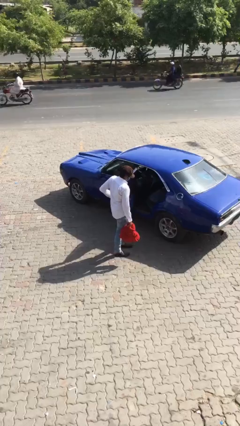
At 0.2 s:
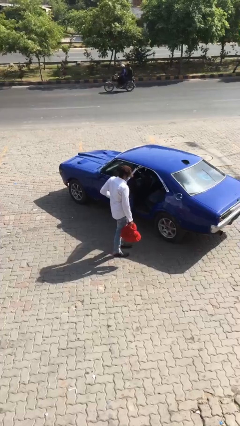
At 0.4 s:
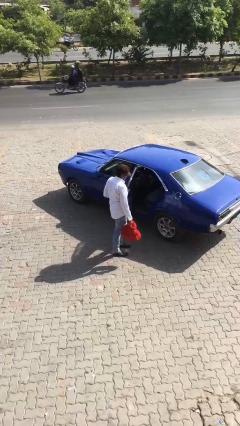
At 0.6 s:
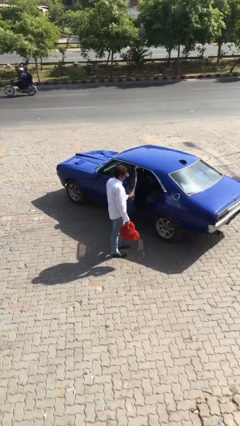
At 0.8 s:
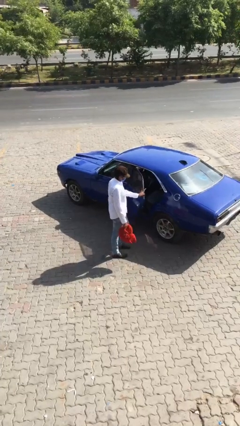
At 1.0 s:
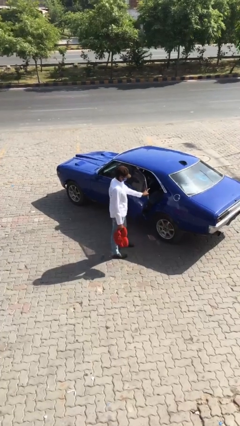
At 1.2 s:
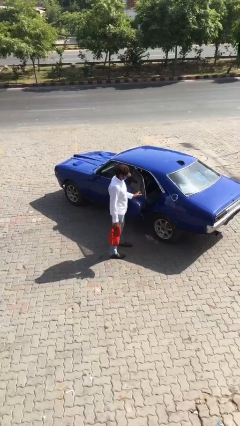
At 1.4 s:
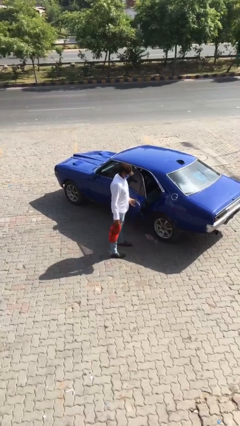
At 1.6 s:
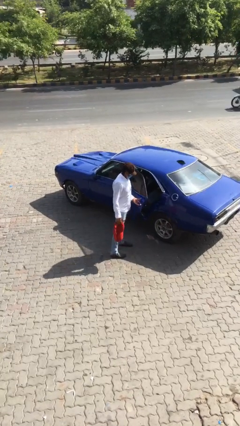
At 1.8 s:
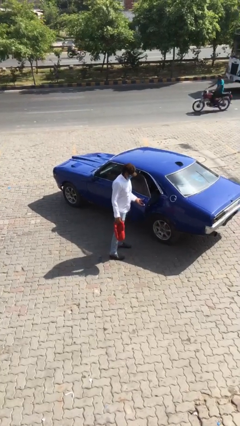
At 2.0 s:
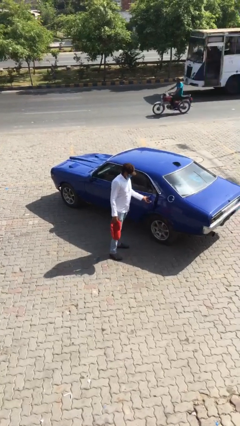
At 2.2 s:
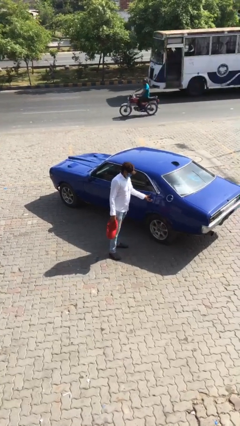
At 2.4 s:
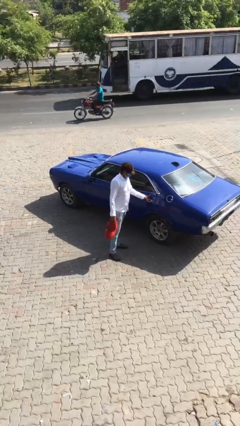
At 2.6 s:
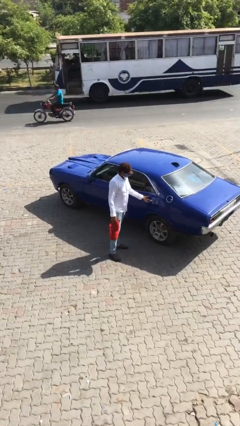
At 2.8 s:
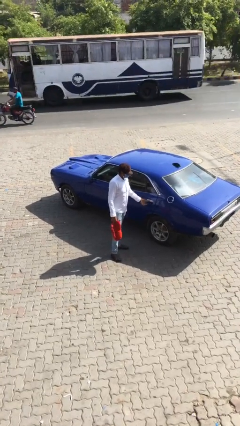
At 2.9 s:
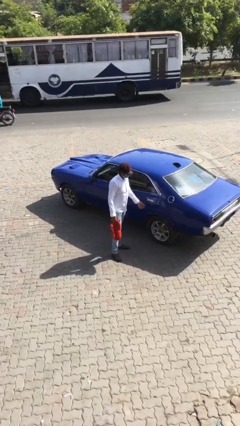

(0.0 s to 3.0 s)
person closes car door

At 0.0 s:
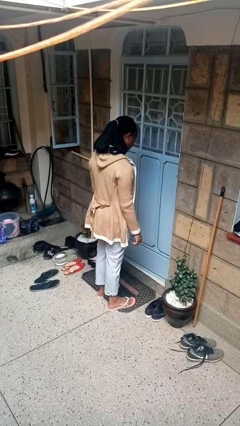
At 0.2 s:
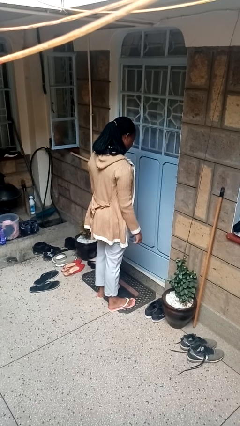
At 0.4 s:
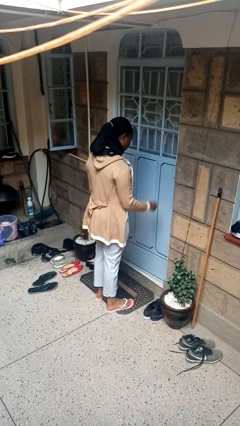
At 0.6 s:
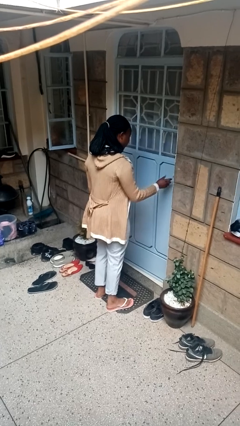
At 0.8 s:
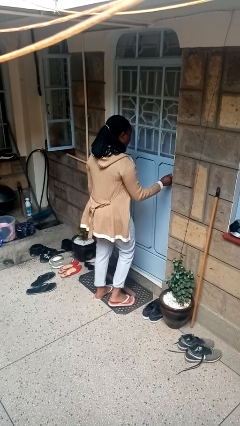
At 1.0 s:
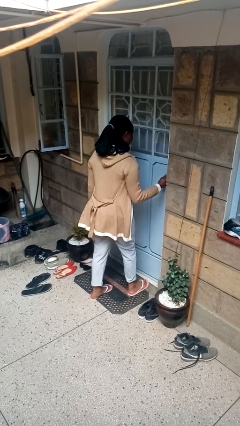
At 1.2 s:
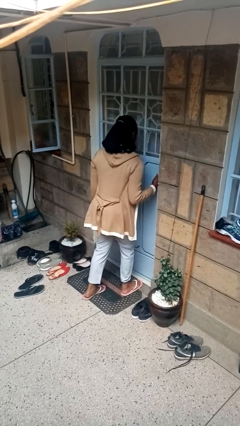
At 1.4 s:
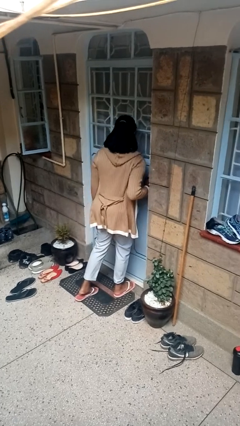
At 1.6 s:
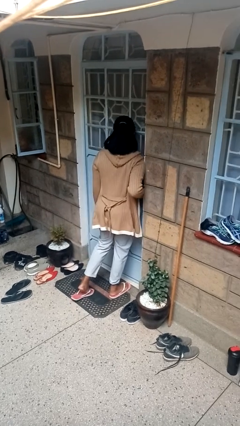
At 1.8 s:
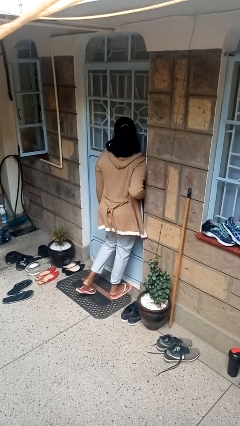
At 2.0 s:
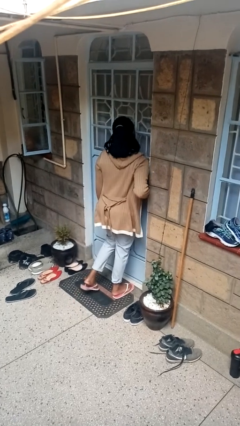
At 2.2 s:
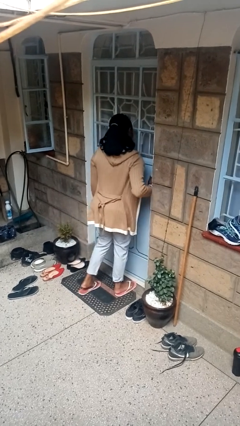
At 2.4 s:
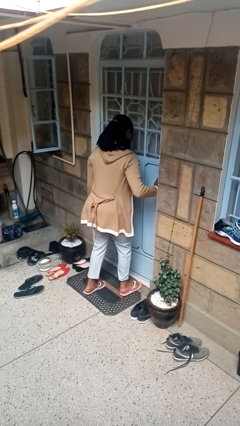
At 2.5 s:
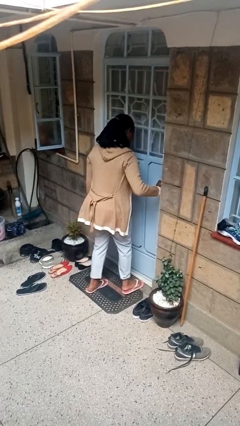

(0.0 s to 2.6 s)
person bumps into wall

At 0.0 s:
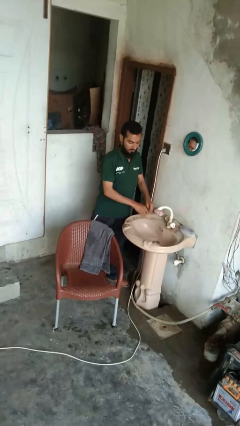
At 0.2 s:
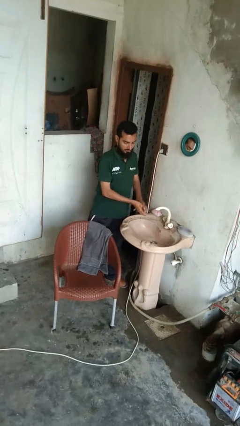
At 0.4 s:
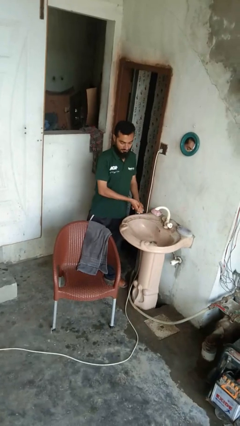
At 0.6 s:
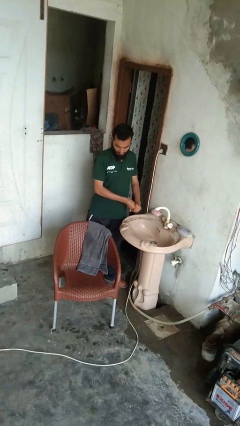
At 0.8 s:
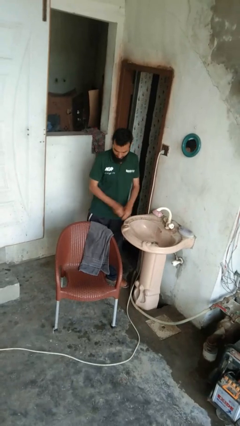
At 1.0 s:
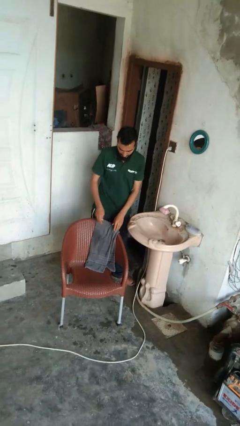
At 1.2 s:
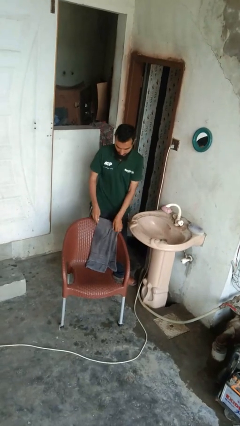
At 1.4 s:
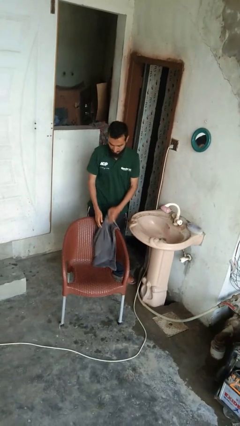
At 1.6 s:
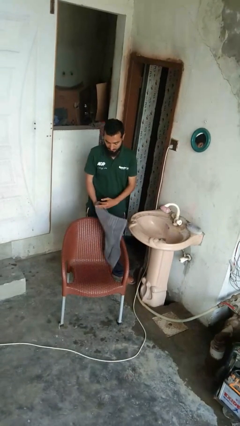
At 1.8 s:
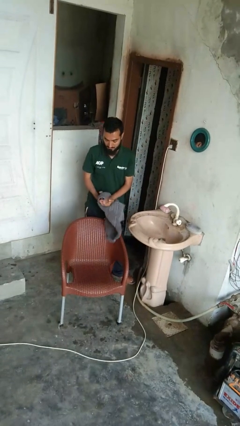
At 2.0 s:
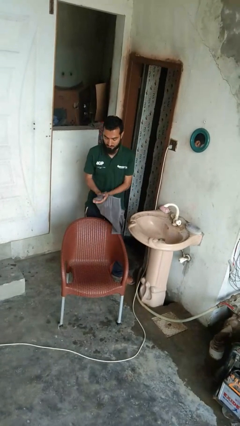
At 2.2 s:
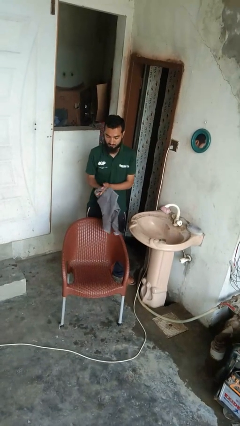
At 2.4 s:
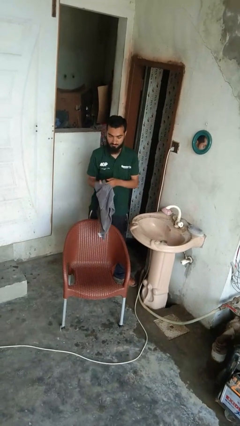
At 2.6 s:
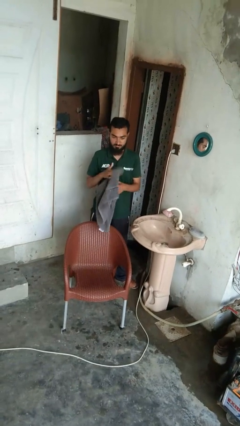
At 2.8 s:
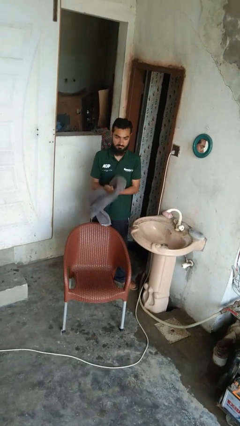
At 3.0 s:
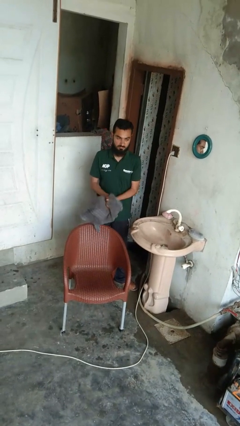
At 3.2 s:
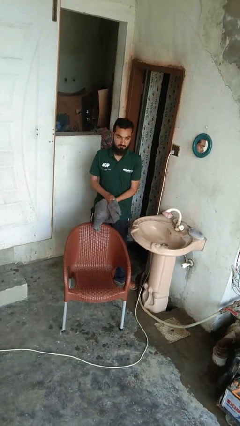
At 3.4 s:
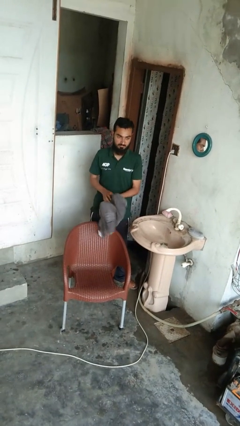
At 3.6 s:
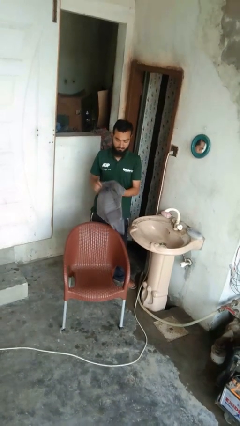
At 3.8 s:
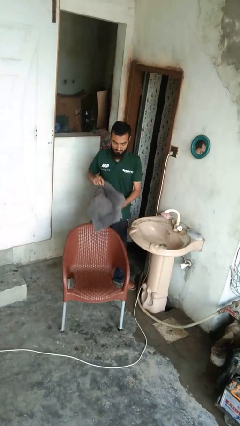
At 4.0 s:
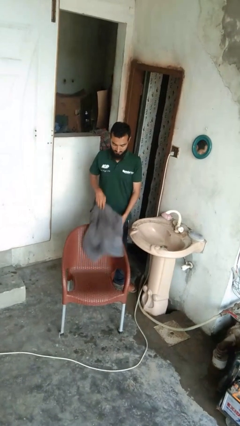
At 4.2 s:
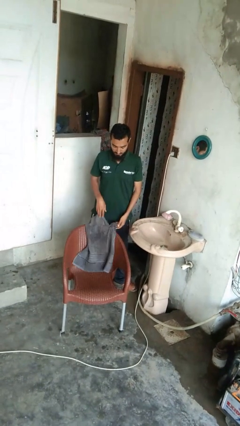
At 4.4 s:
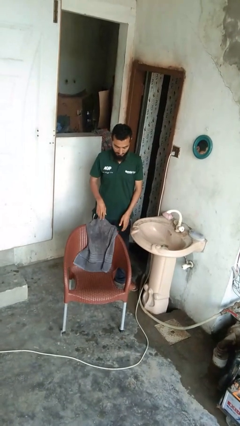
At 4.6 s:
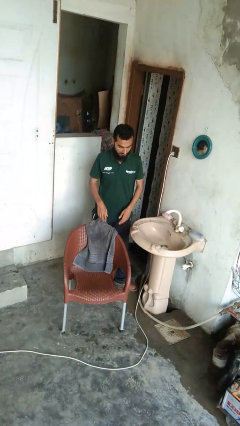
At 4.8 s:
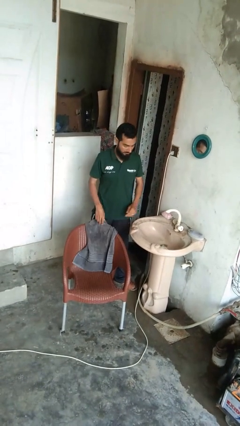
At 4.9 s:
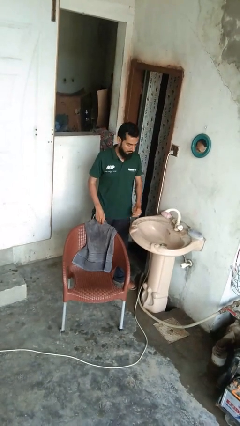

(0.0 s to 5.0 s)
person dries hands with towel

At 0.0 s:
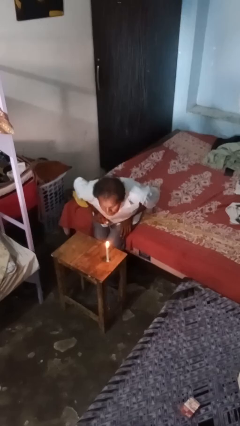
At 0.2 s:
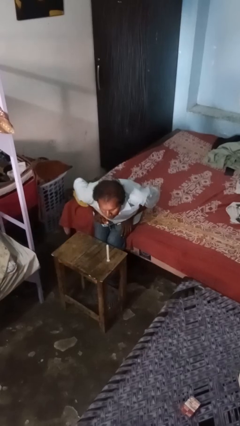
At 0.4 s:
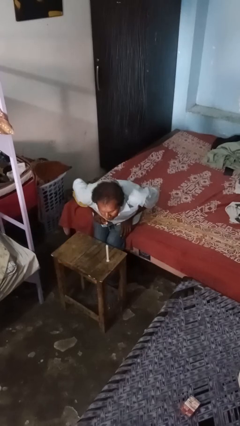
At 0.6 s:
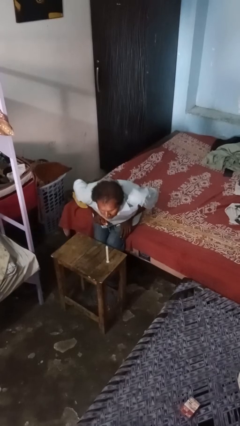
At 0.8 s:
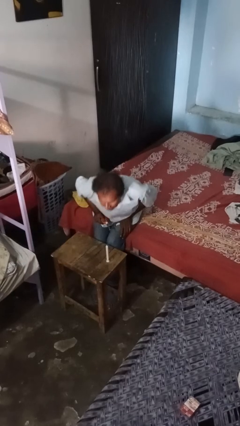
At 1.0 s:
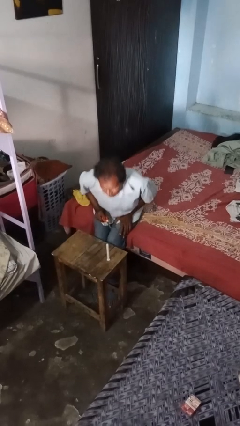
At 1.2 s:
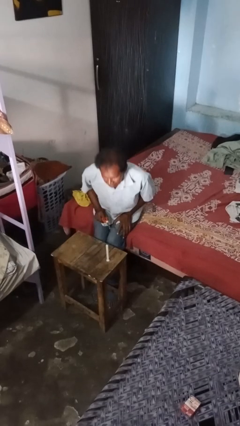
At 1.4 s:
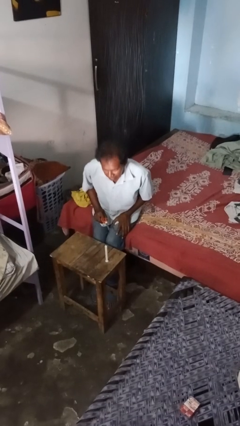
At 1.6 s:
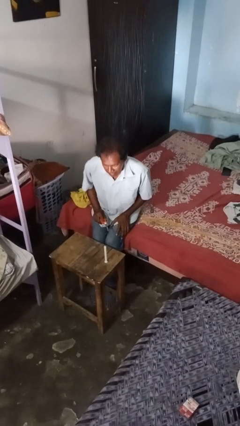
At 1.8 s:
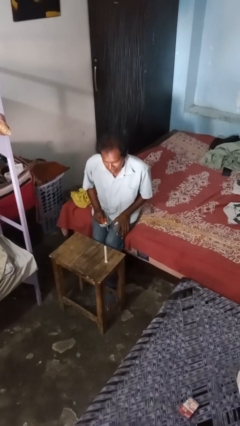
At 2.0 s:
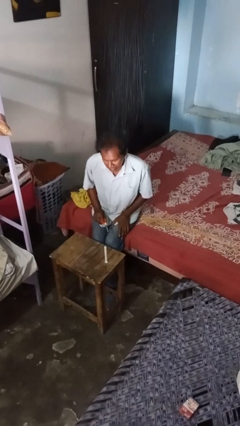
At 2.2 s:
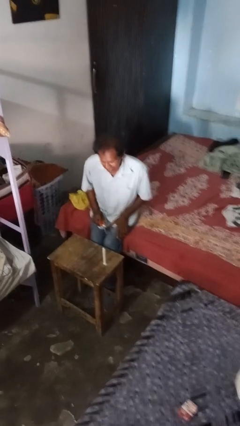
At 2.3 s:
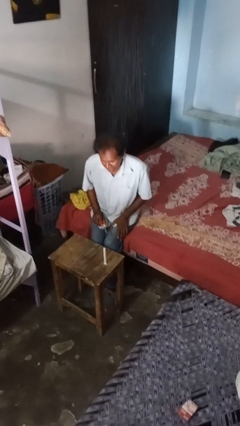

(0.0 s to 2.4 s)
person extinguishes candle

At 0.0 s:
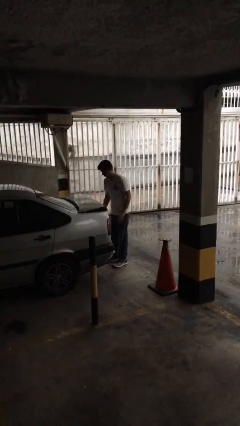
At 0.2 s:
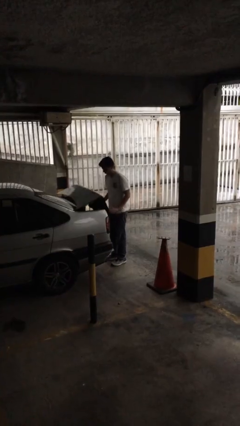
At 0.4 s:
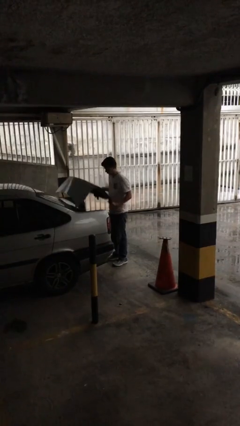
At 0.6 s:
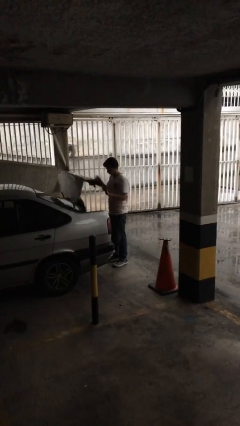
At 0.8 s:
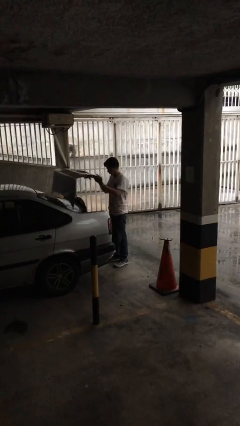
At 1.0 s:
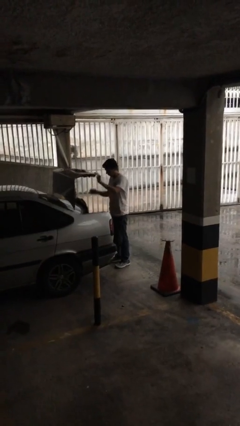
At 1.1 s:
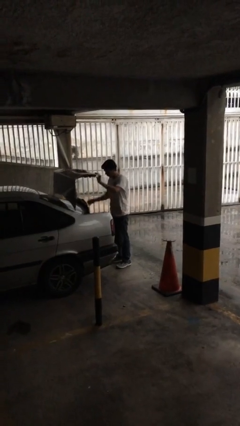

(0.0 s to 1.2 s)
person opens car trunk

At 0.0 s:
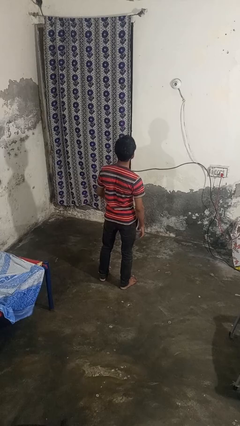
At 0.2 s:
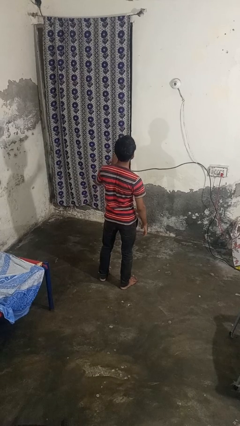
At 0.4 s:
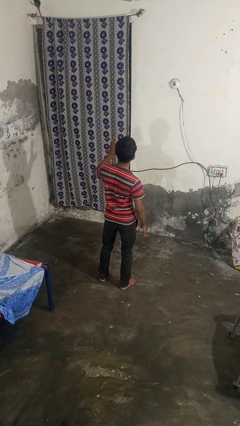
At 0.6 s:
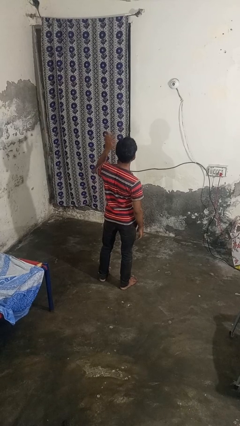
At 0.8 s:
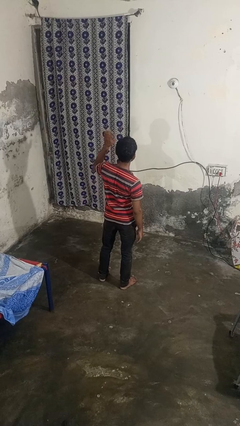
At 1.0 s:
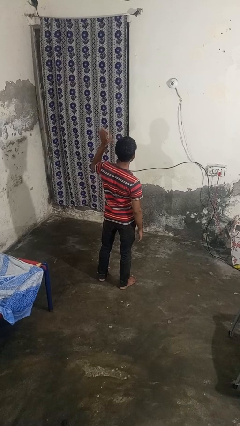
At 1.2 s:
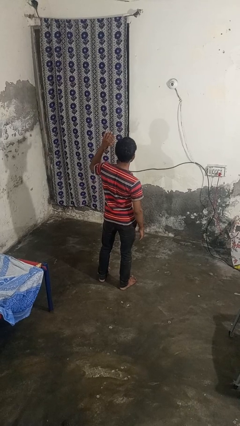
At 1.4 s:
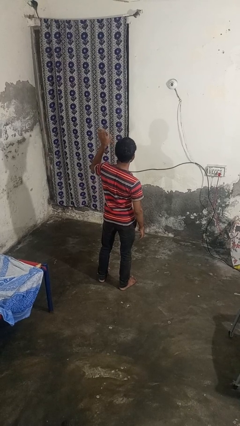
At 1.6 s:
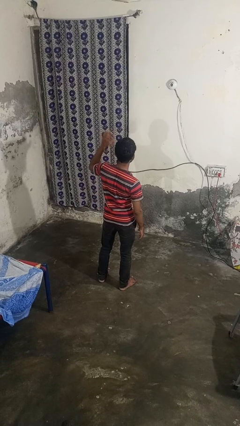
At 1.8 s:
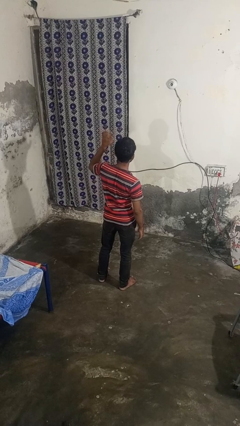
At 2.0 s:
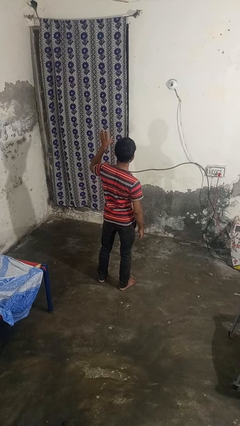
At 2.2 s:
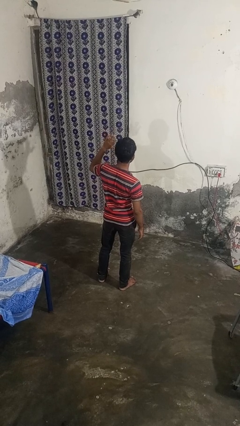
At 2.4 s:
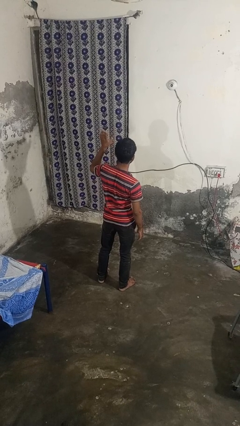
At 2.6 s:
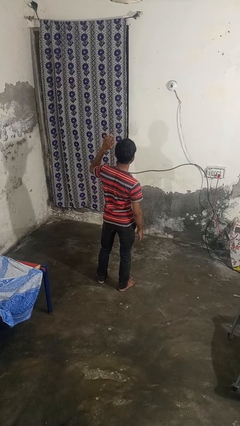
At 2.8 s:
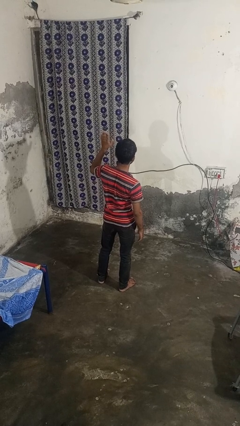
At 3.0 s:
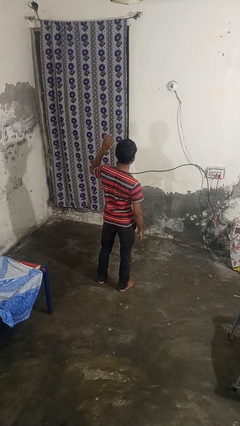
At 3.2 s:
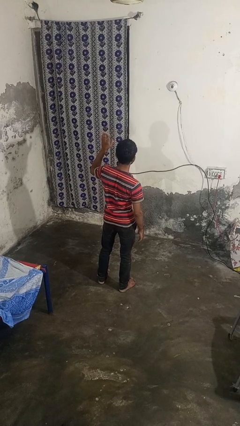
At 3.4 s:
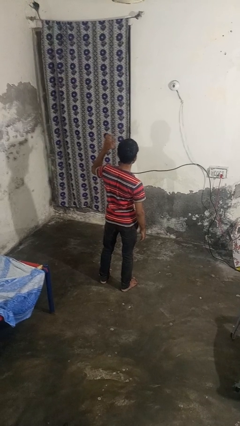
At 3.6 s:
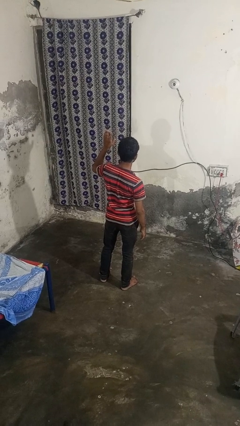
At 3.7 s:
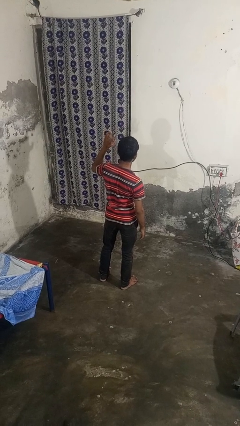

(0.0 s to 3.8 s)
person waves at person
